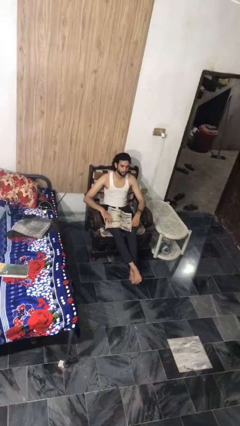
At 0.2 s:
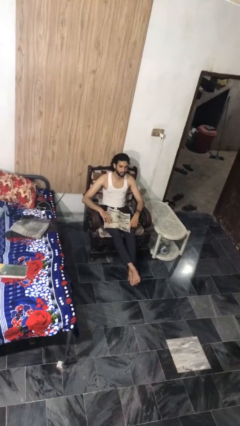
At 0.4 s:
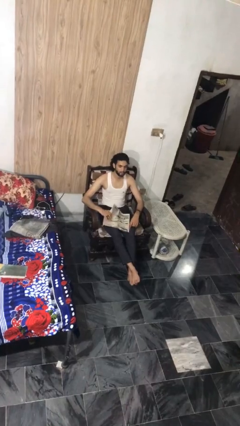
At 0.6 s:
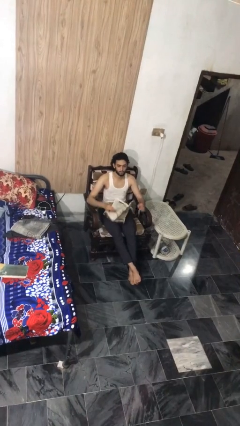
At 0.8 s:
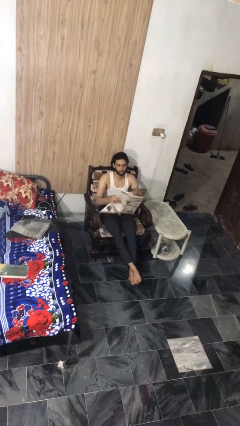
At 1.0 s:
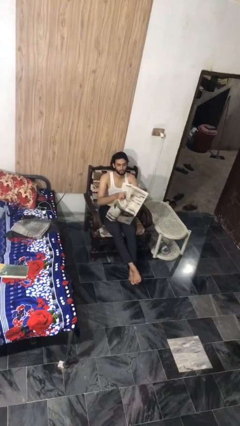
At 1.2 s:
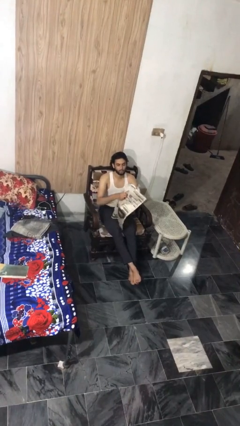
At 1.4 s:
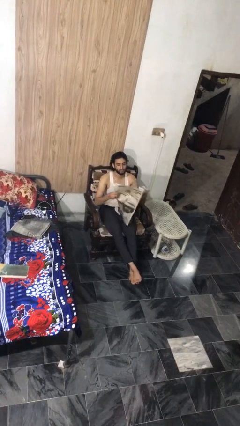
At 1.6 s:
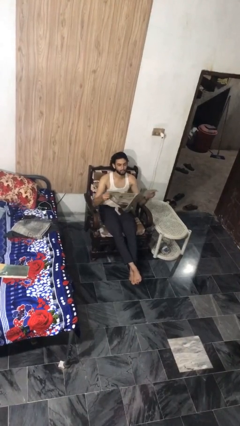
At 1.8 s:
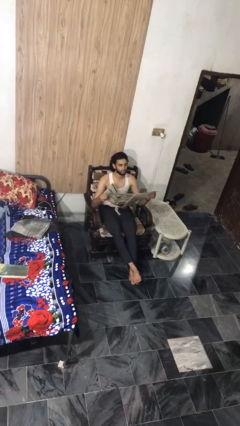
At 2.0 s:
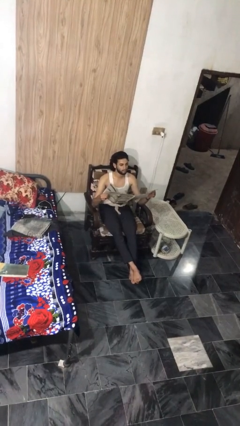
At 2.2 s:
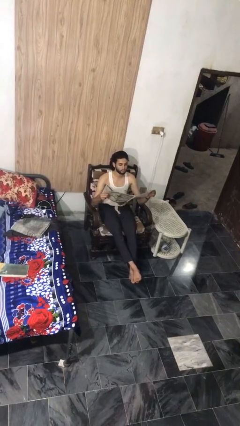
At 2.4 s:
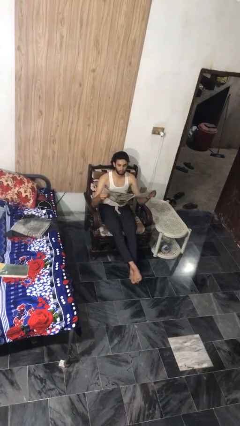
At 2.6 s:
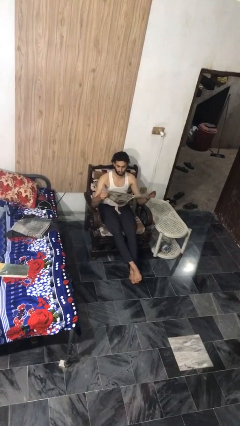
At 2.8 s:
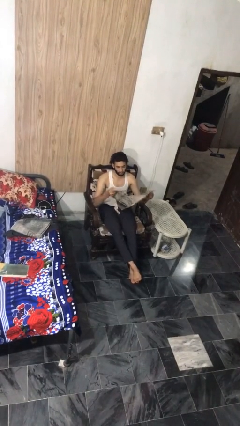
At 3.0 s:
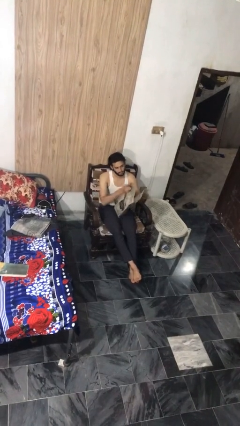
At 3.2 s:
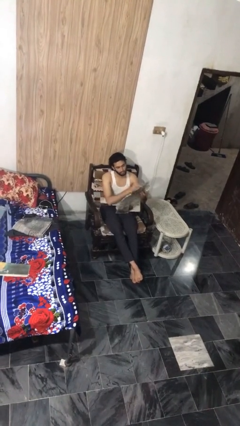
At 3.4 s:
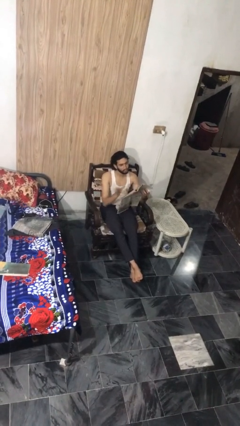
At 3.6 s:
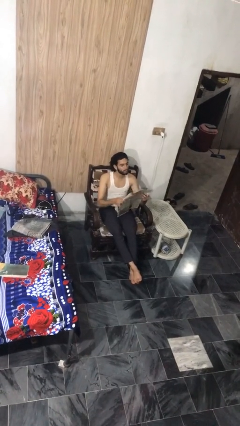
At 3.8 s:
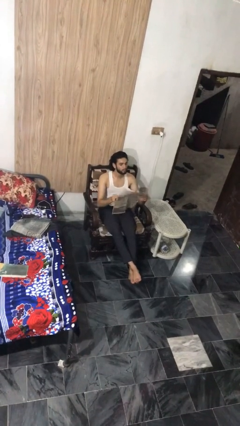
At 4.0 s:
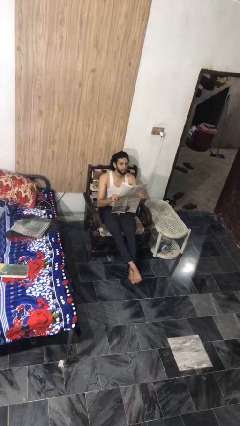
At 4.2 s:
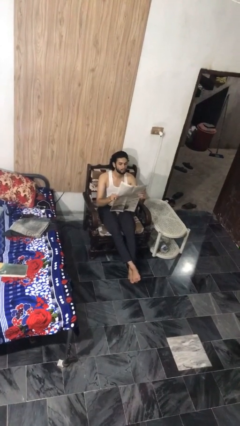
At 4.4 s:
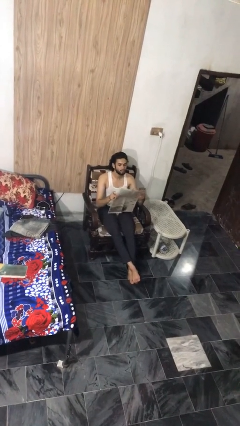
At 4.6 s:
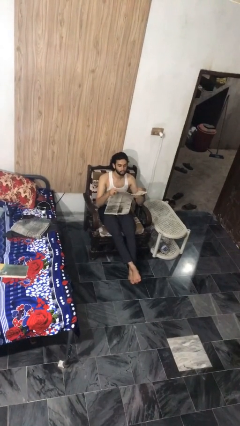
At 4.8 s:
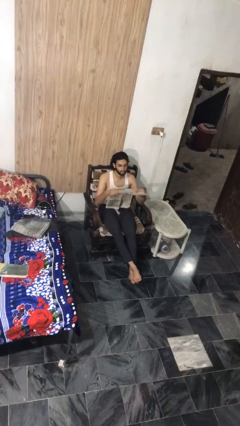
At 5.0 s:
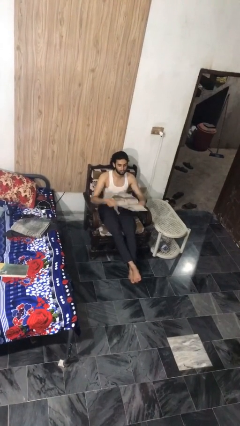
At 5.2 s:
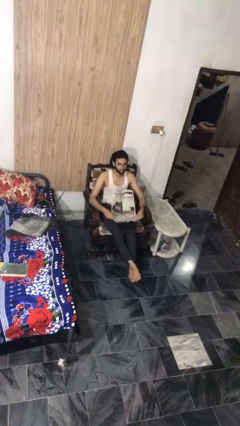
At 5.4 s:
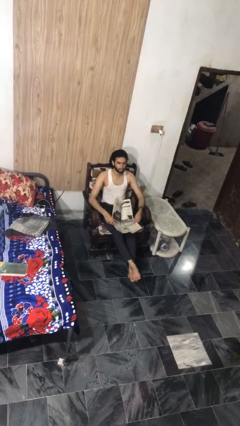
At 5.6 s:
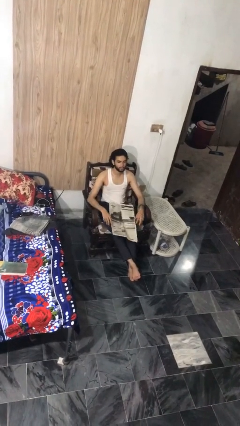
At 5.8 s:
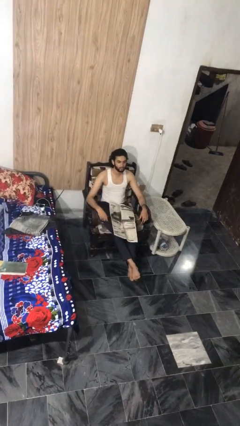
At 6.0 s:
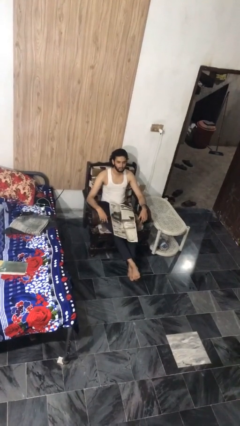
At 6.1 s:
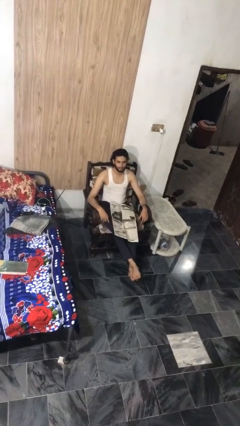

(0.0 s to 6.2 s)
person reads newspaper

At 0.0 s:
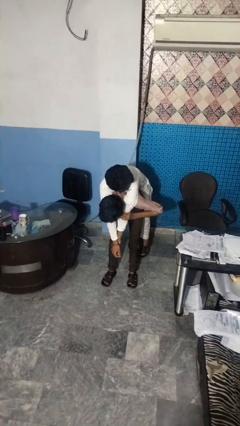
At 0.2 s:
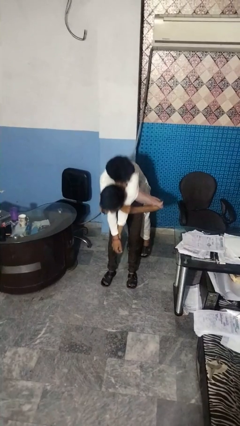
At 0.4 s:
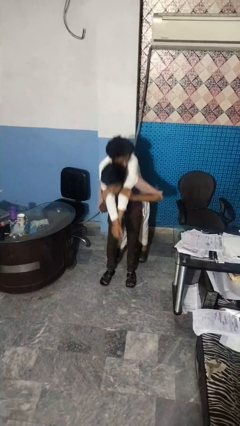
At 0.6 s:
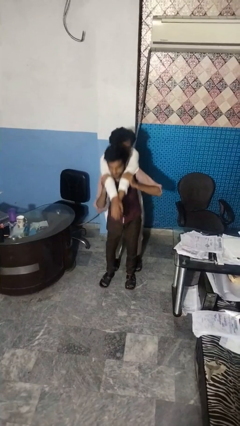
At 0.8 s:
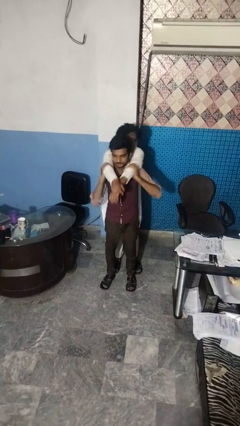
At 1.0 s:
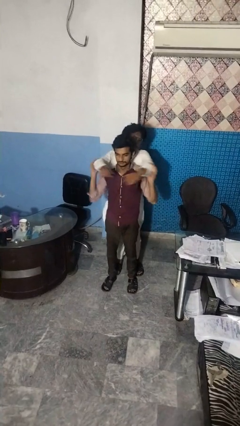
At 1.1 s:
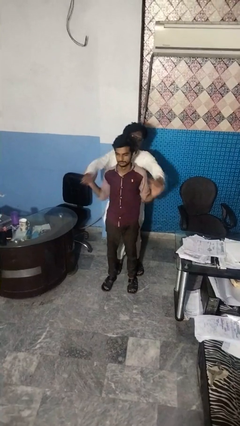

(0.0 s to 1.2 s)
person puts down person

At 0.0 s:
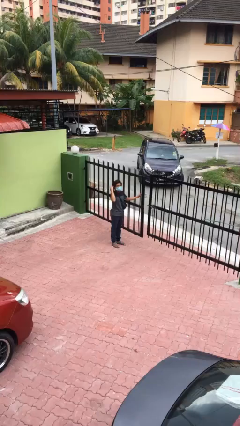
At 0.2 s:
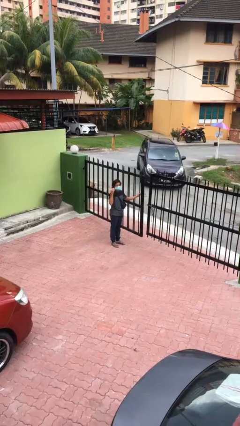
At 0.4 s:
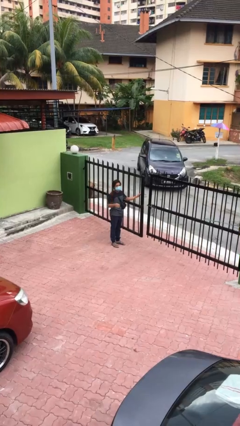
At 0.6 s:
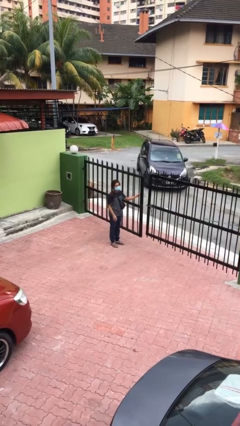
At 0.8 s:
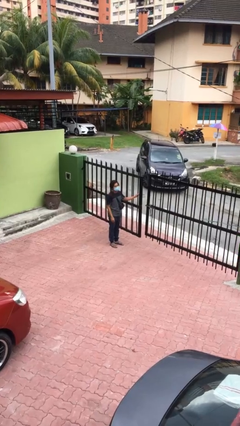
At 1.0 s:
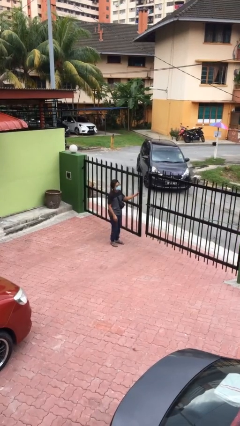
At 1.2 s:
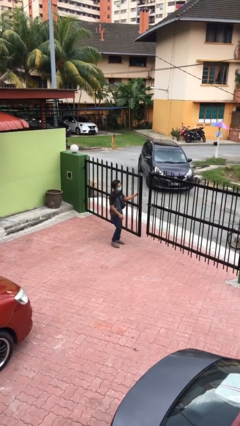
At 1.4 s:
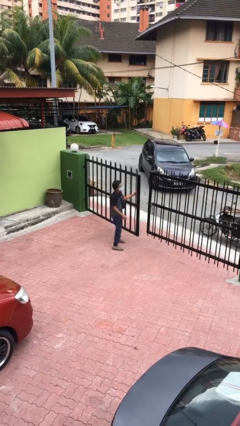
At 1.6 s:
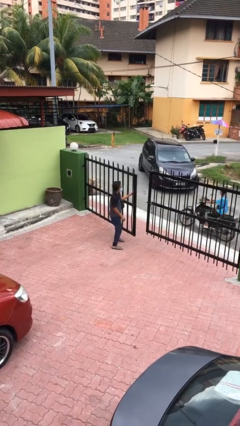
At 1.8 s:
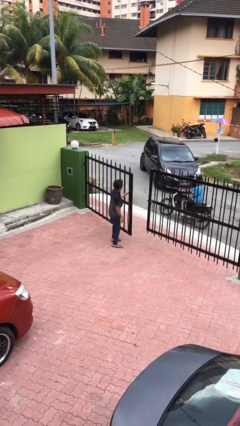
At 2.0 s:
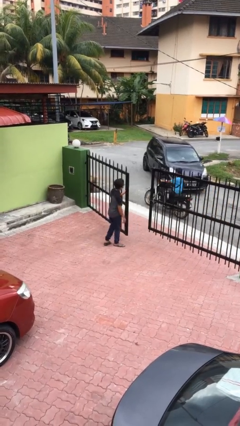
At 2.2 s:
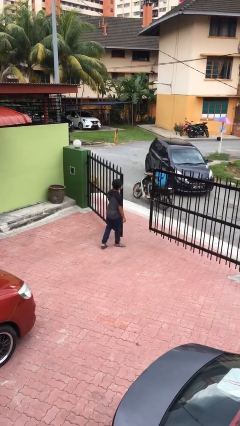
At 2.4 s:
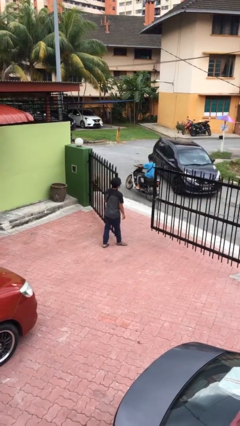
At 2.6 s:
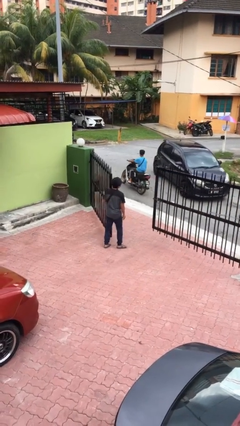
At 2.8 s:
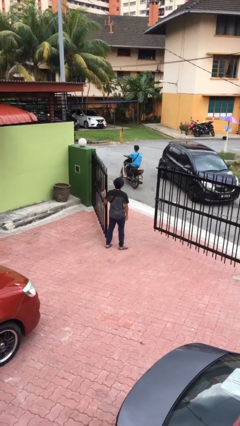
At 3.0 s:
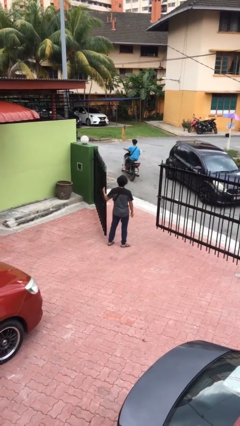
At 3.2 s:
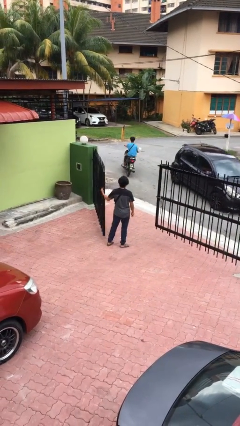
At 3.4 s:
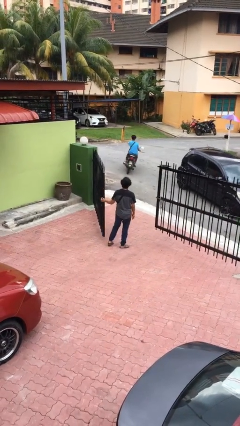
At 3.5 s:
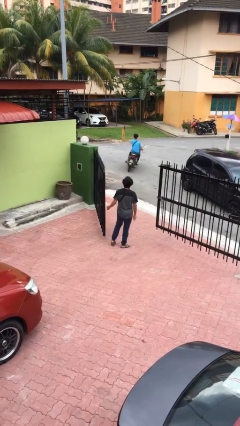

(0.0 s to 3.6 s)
person opens facility door

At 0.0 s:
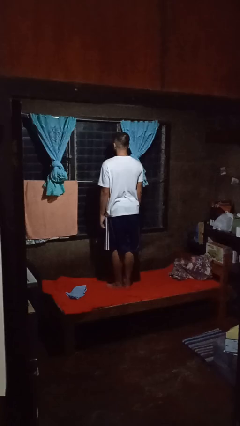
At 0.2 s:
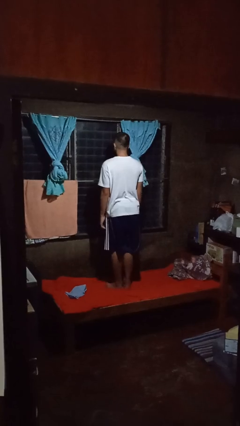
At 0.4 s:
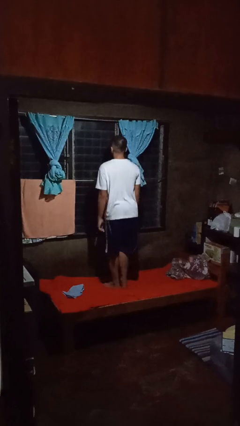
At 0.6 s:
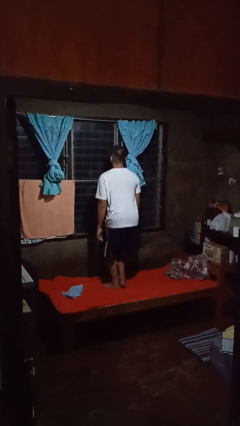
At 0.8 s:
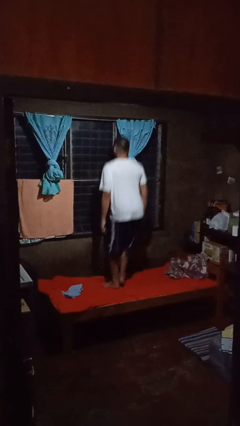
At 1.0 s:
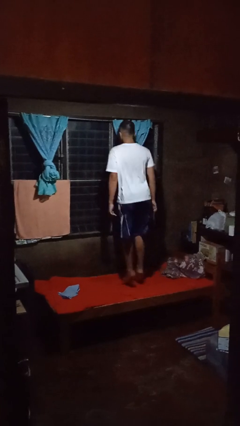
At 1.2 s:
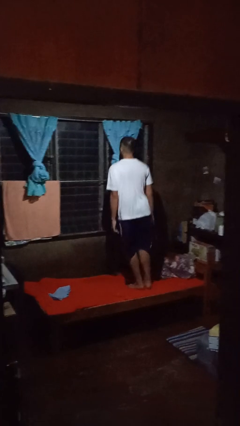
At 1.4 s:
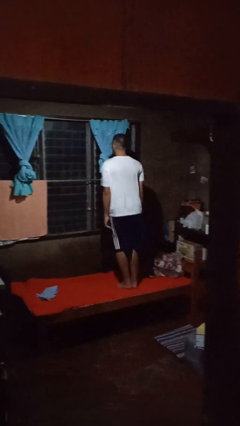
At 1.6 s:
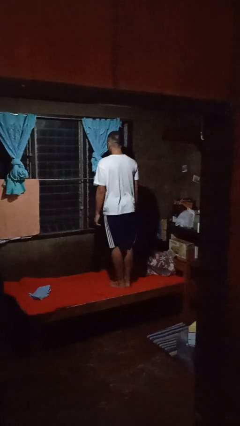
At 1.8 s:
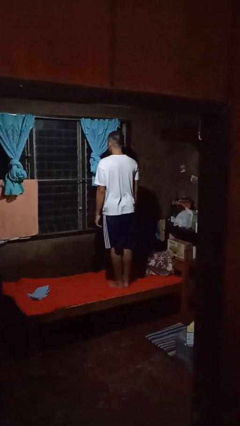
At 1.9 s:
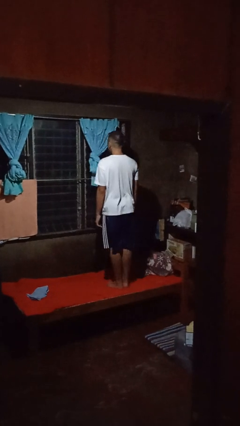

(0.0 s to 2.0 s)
person jumps on bed

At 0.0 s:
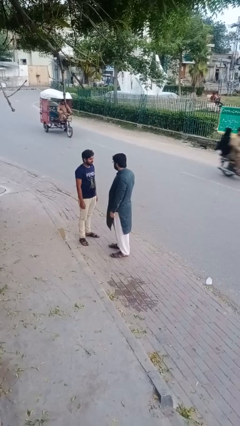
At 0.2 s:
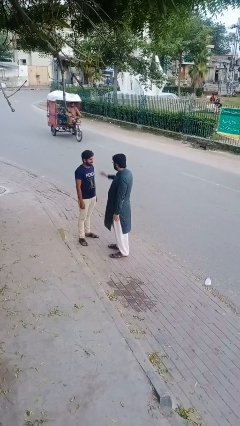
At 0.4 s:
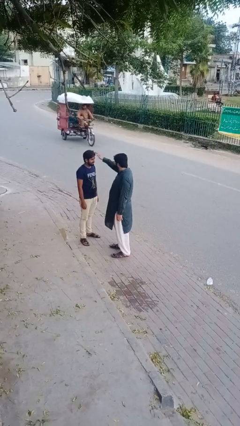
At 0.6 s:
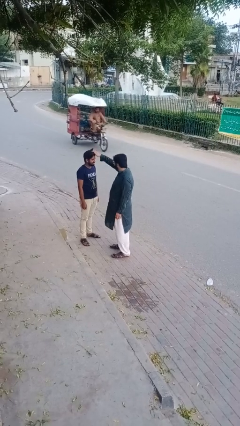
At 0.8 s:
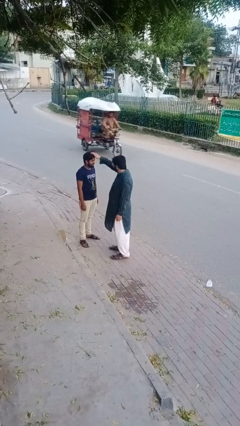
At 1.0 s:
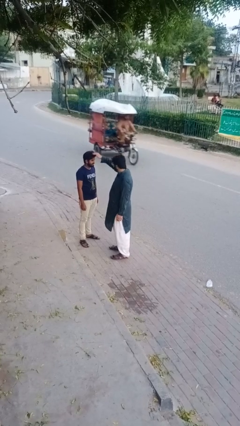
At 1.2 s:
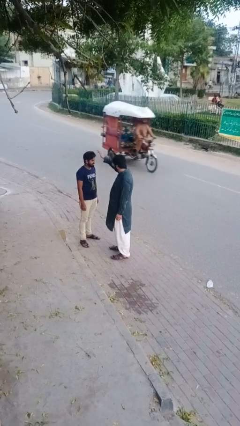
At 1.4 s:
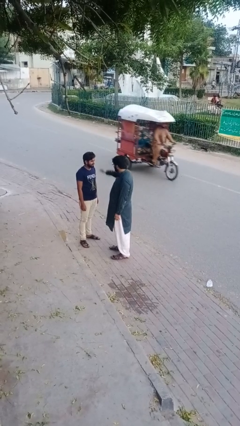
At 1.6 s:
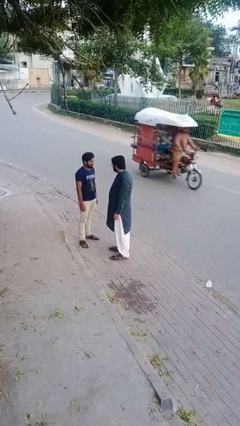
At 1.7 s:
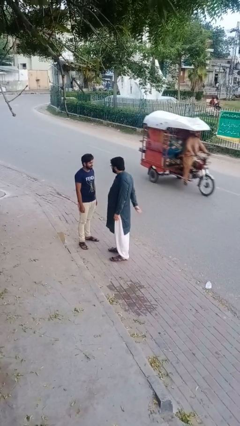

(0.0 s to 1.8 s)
person grabs person by hair

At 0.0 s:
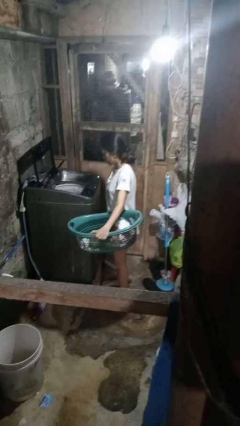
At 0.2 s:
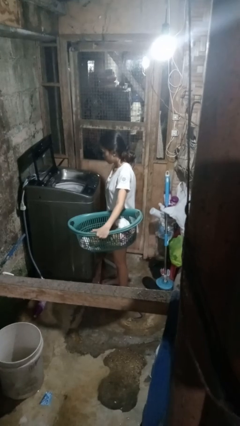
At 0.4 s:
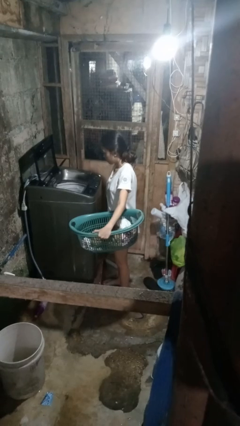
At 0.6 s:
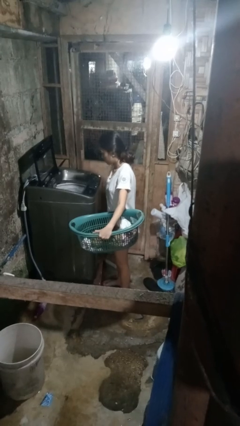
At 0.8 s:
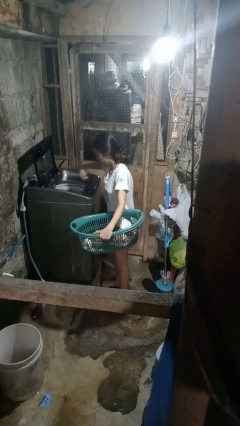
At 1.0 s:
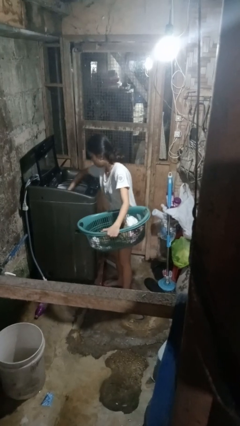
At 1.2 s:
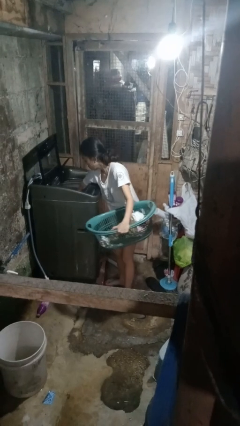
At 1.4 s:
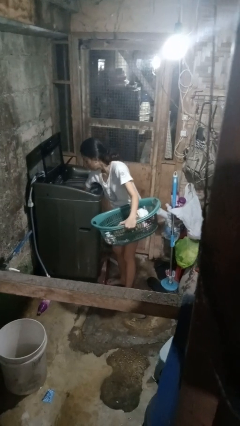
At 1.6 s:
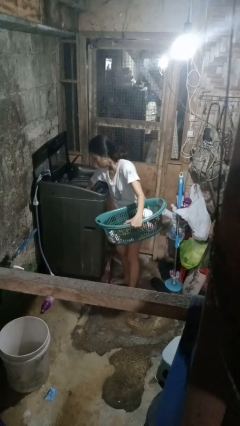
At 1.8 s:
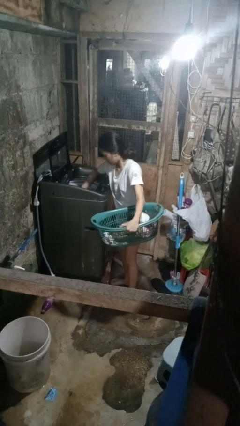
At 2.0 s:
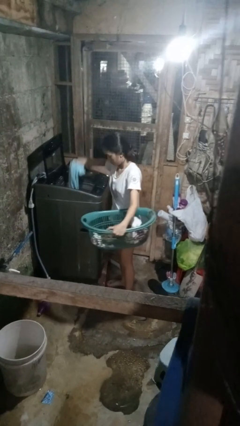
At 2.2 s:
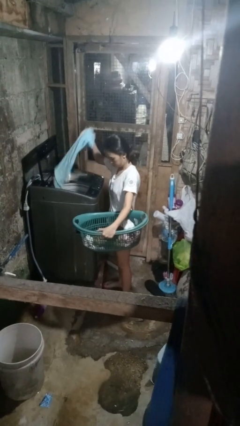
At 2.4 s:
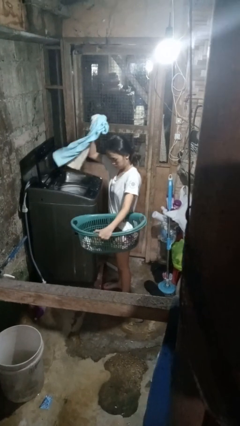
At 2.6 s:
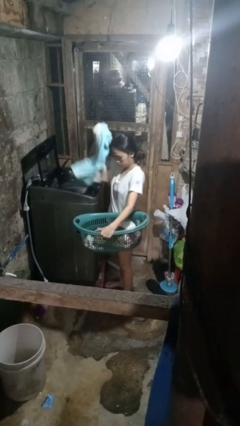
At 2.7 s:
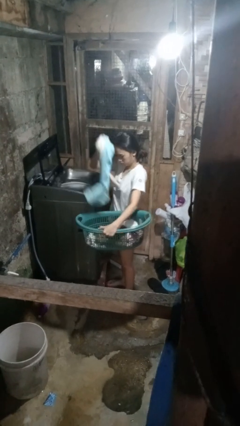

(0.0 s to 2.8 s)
person unloads clotheswasher
